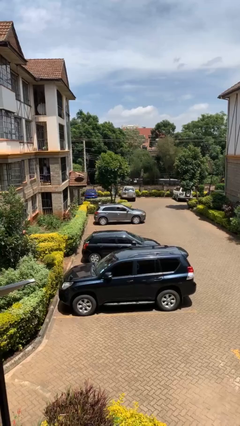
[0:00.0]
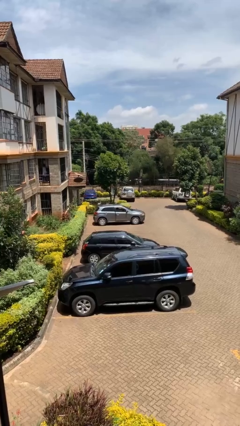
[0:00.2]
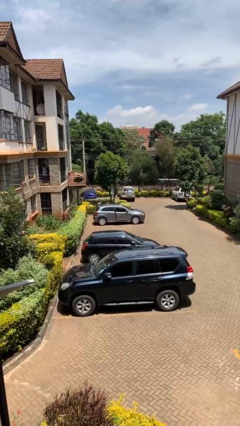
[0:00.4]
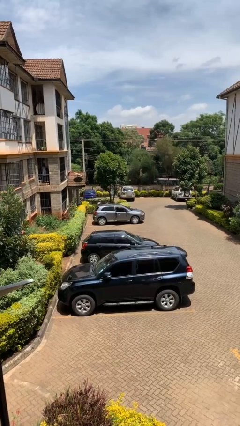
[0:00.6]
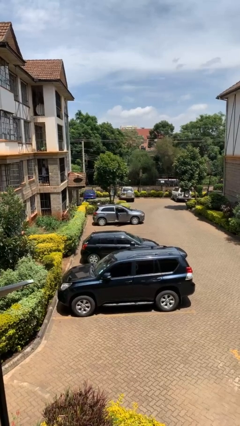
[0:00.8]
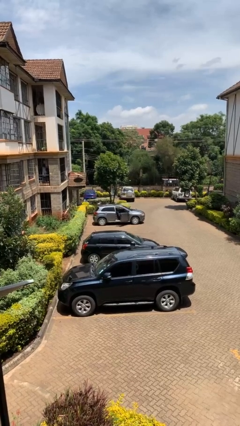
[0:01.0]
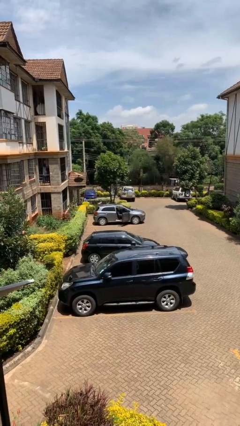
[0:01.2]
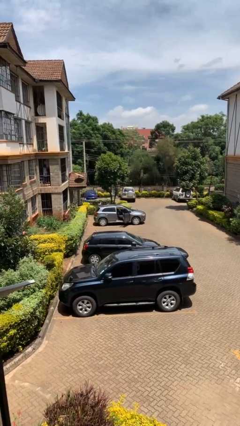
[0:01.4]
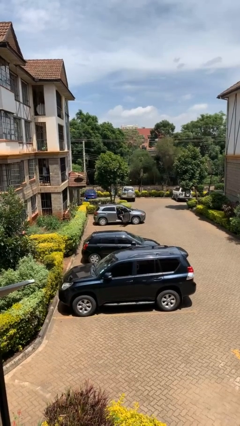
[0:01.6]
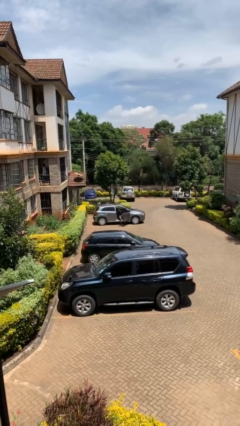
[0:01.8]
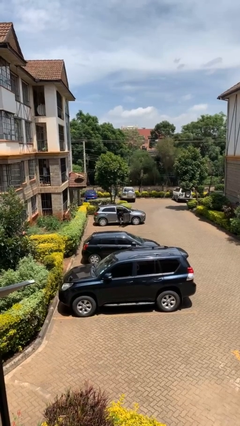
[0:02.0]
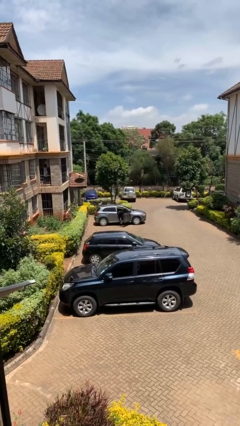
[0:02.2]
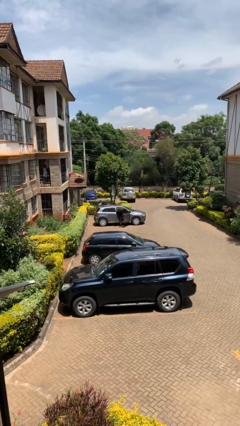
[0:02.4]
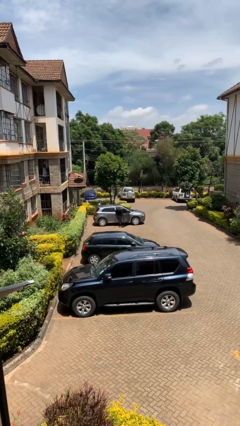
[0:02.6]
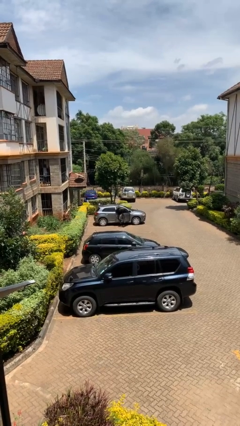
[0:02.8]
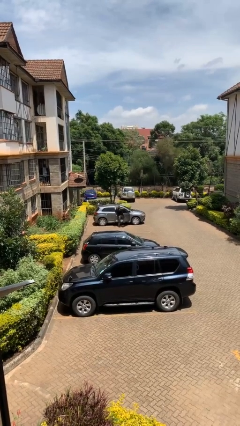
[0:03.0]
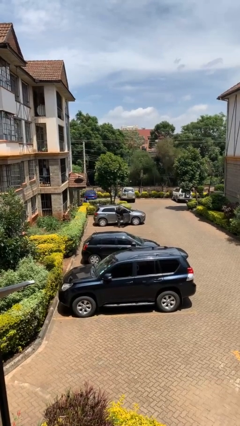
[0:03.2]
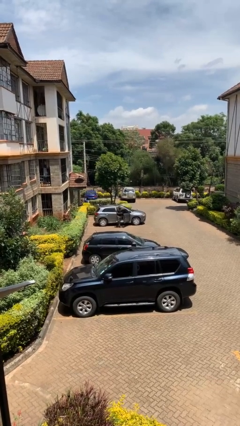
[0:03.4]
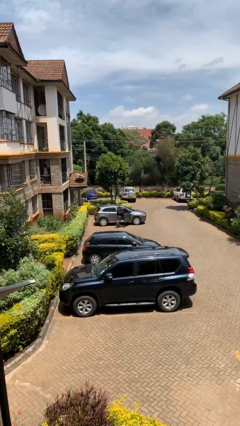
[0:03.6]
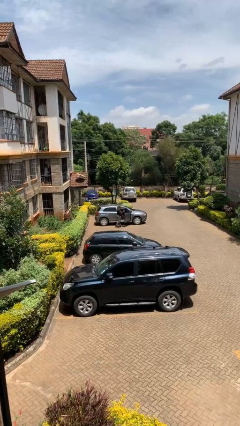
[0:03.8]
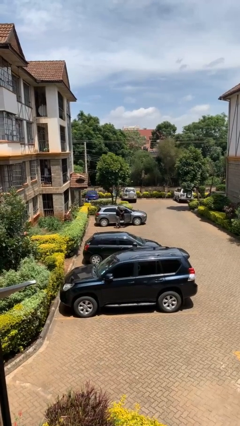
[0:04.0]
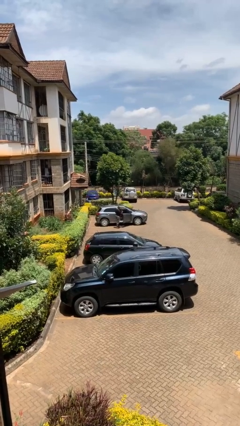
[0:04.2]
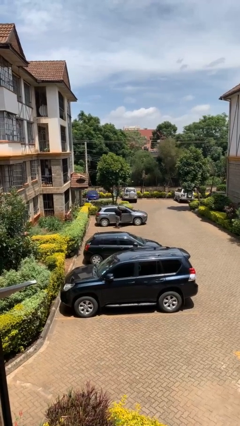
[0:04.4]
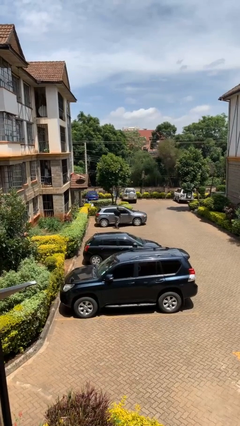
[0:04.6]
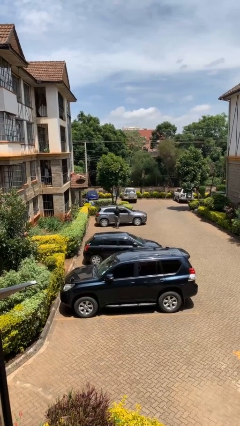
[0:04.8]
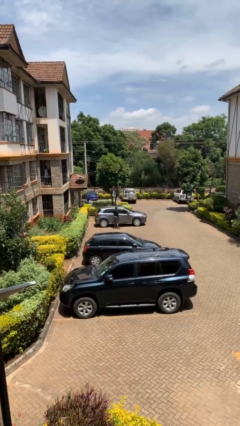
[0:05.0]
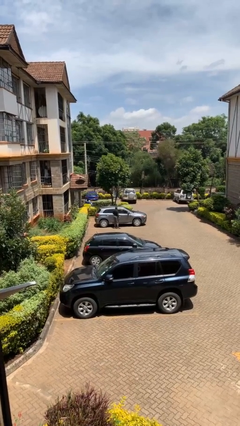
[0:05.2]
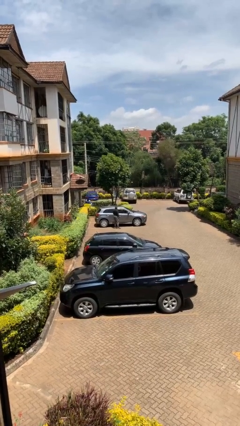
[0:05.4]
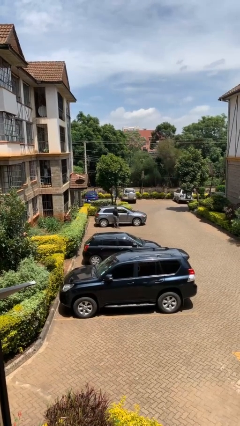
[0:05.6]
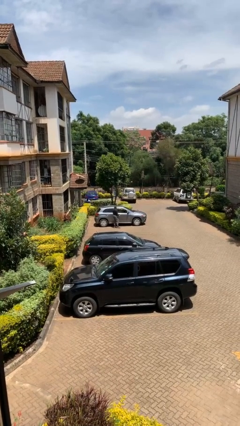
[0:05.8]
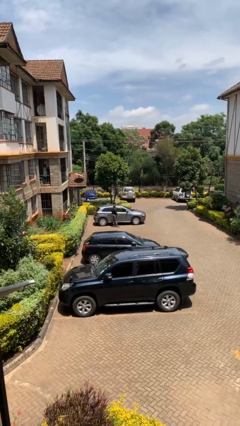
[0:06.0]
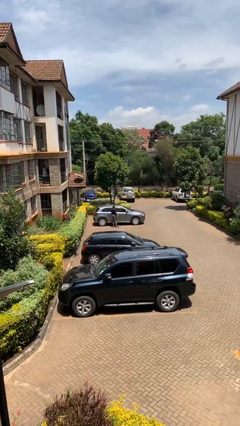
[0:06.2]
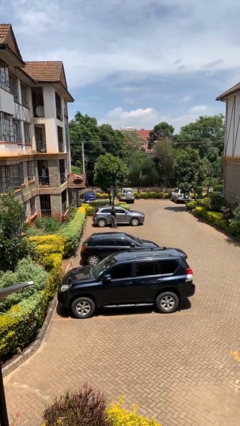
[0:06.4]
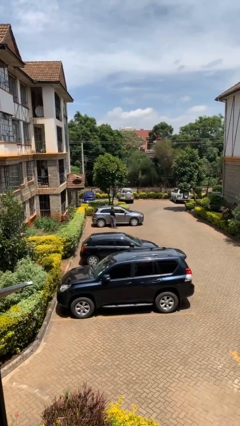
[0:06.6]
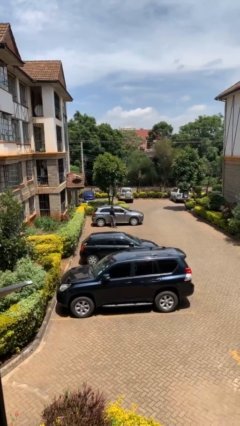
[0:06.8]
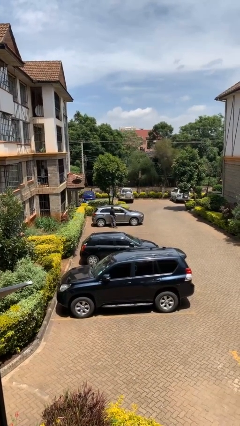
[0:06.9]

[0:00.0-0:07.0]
car drops off person

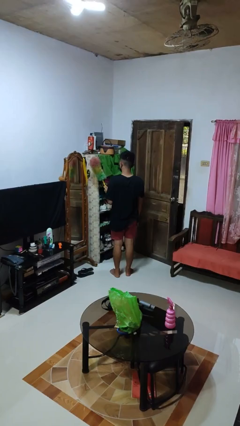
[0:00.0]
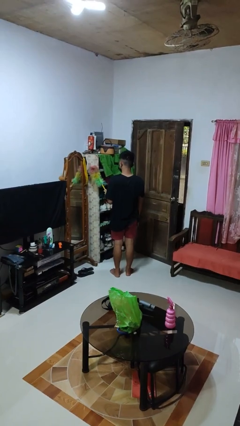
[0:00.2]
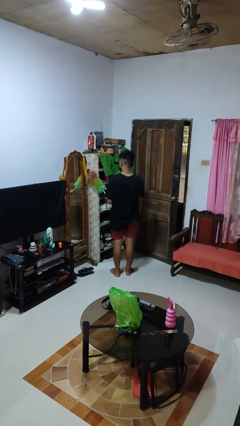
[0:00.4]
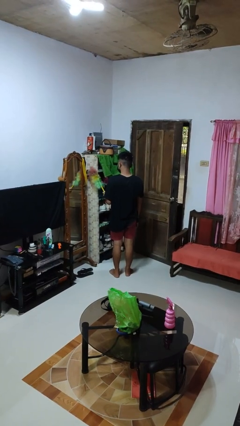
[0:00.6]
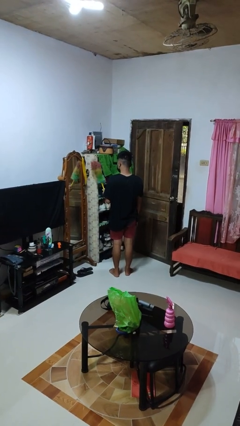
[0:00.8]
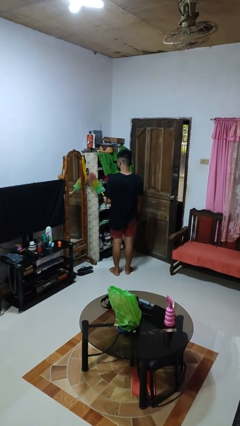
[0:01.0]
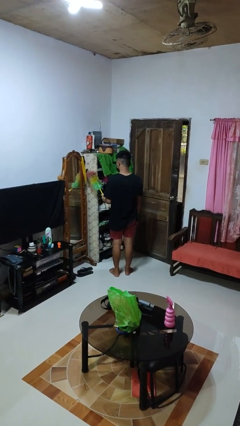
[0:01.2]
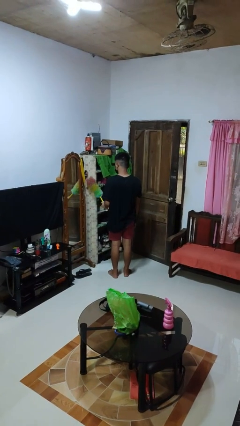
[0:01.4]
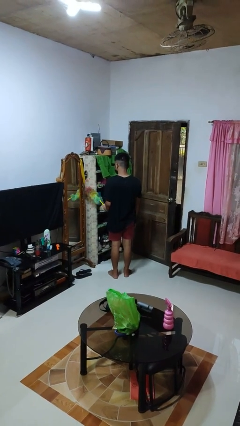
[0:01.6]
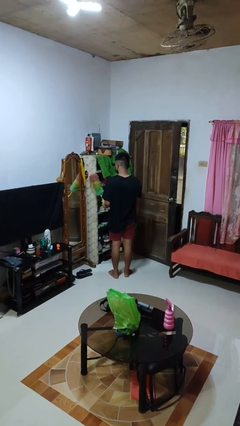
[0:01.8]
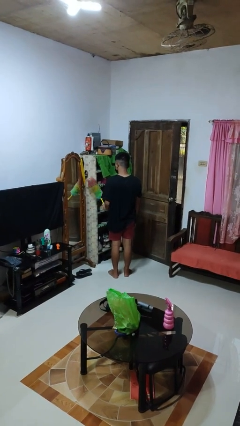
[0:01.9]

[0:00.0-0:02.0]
person dusts furniture

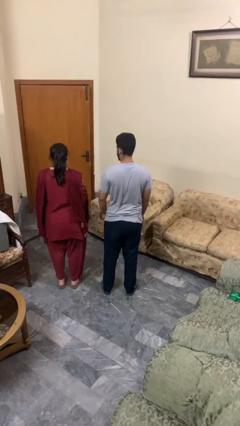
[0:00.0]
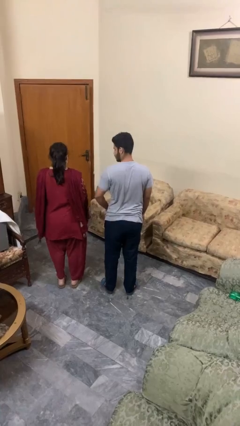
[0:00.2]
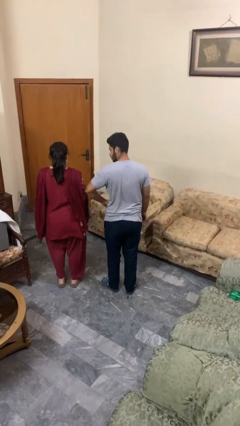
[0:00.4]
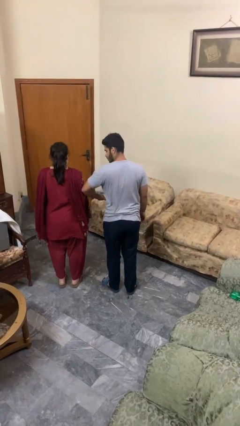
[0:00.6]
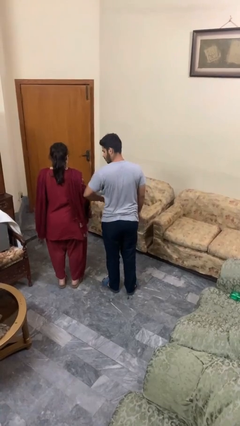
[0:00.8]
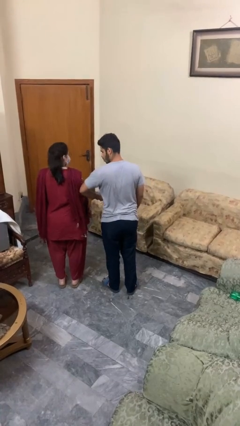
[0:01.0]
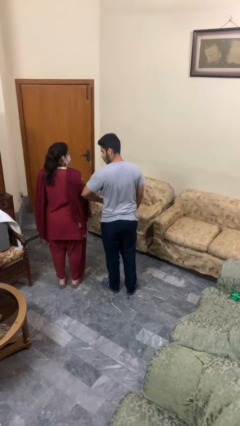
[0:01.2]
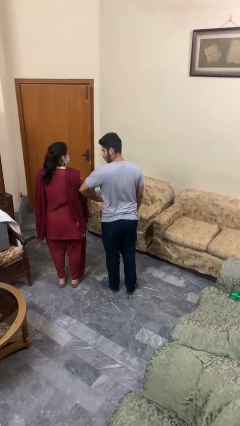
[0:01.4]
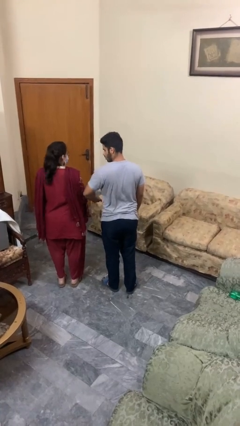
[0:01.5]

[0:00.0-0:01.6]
person nudges person with elbow

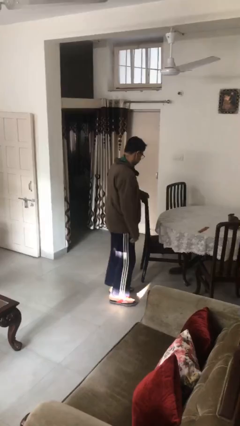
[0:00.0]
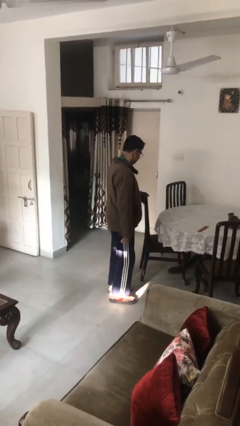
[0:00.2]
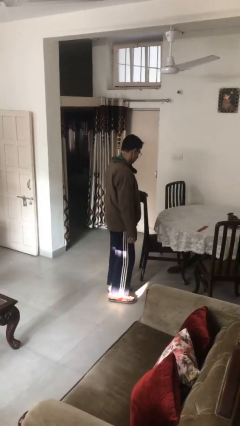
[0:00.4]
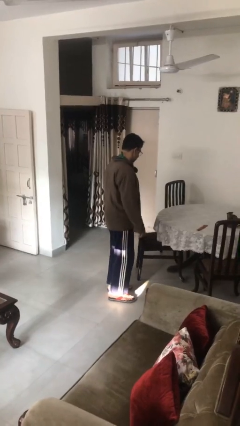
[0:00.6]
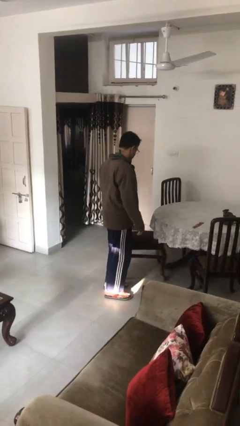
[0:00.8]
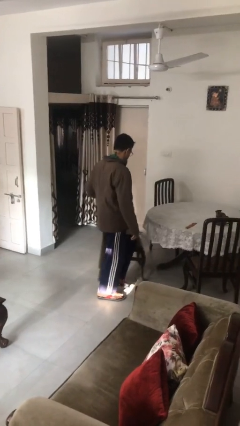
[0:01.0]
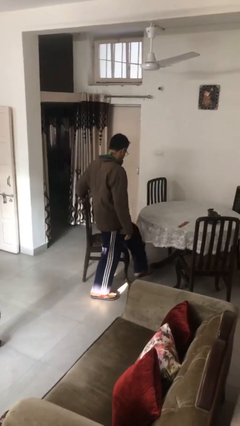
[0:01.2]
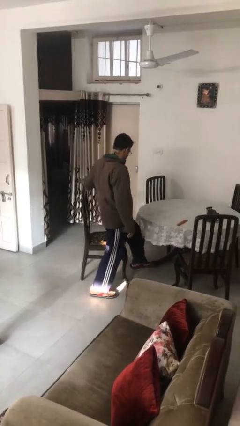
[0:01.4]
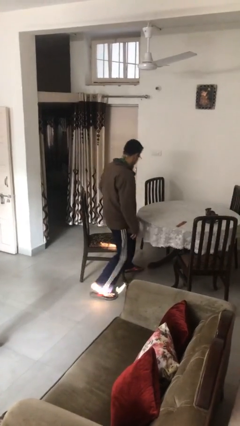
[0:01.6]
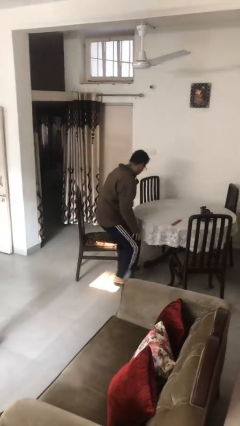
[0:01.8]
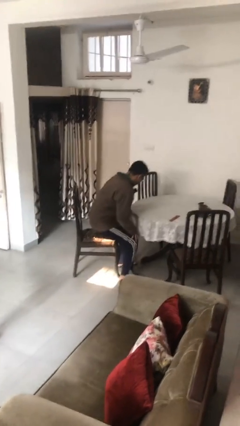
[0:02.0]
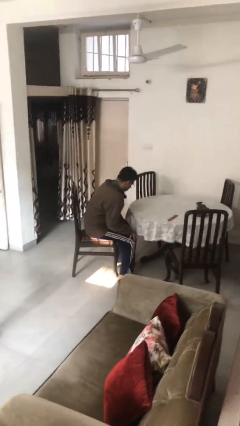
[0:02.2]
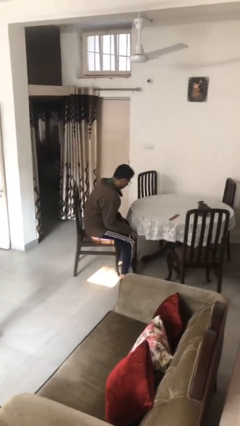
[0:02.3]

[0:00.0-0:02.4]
person sits down

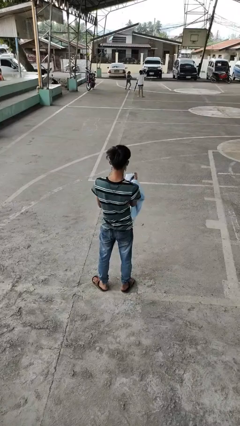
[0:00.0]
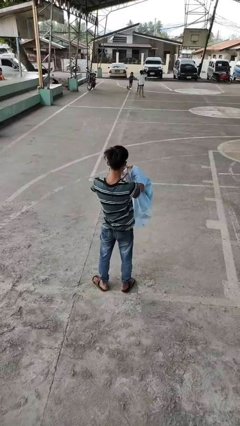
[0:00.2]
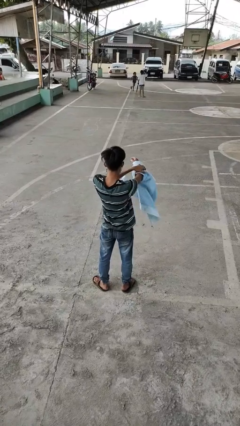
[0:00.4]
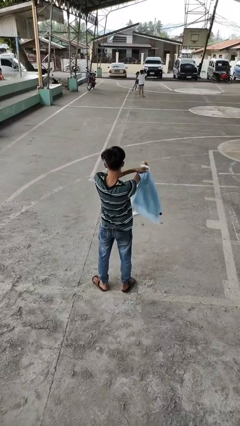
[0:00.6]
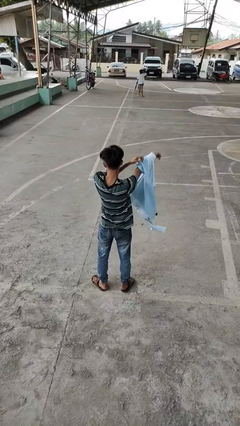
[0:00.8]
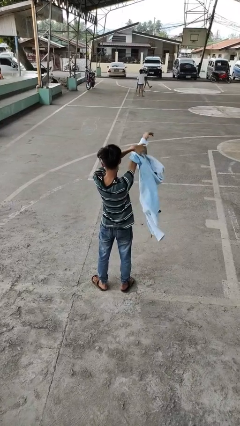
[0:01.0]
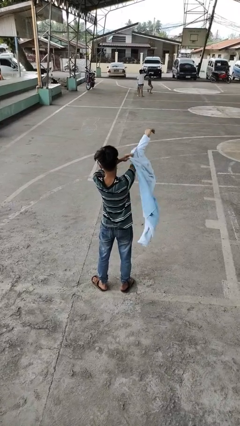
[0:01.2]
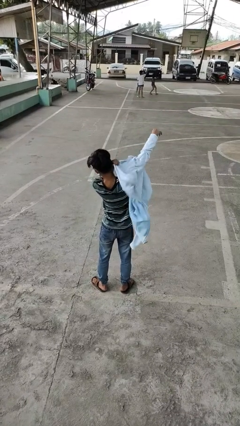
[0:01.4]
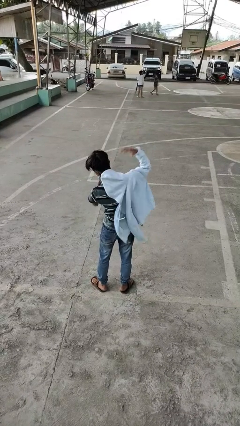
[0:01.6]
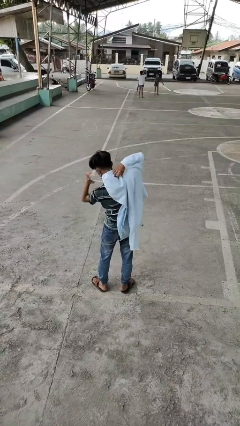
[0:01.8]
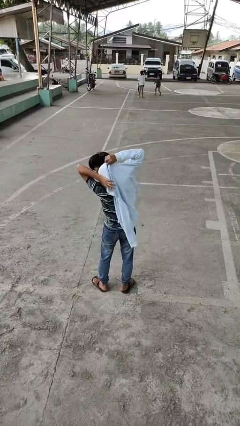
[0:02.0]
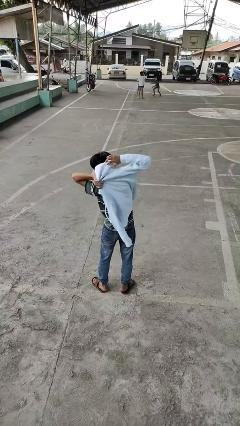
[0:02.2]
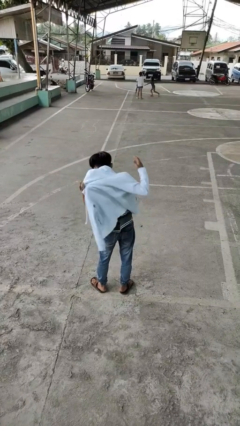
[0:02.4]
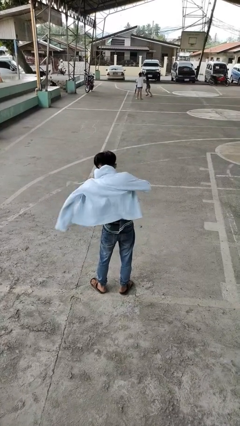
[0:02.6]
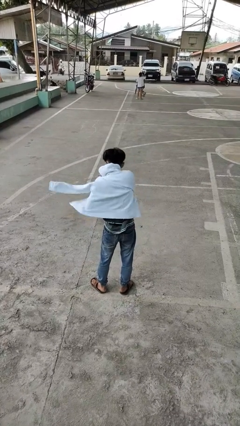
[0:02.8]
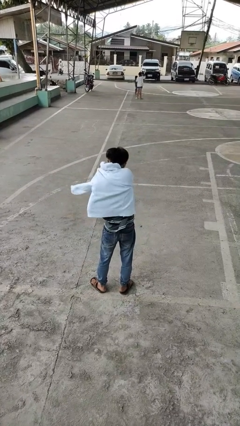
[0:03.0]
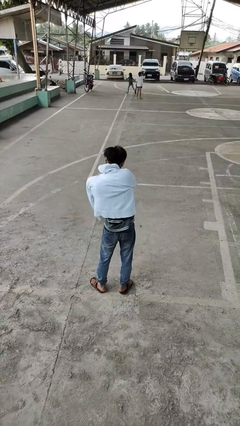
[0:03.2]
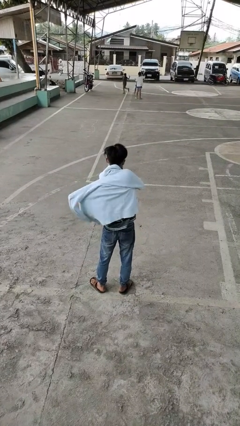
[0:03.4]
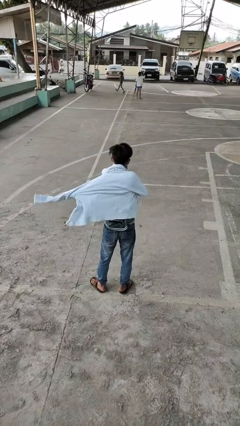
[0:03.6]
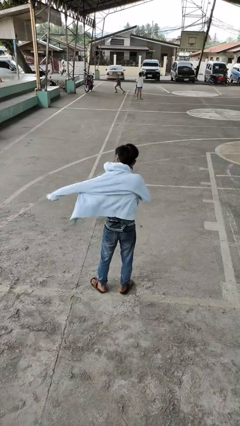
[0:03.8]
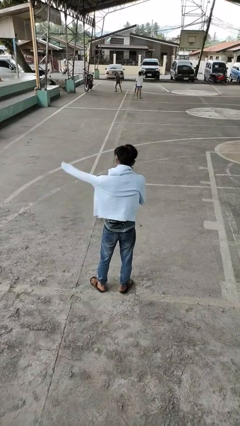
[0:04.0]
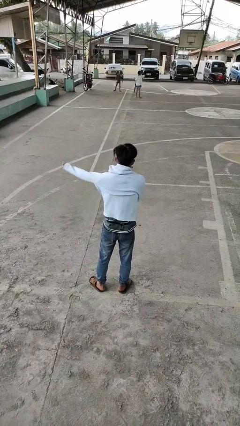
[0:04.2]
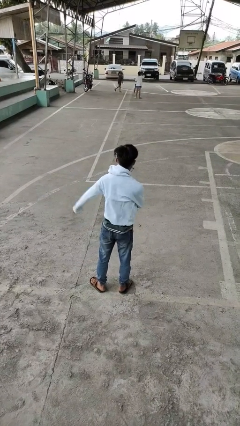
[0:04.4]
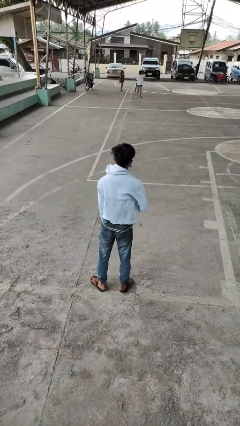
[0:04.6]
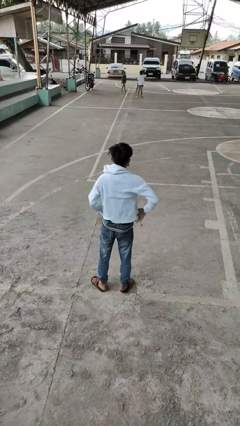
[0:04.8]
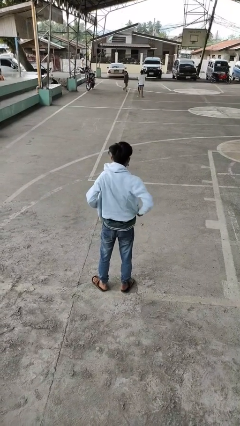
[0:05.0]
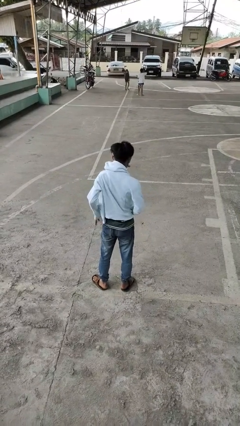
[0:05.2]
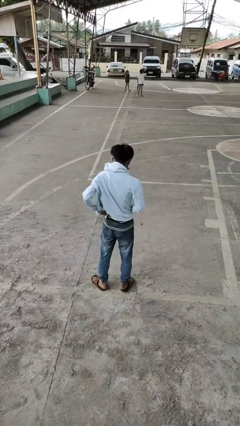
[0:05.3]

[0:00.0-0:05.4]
person puts on jacket
